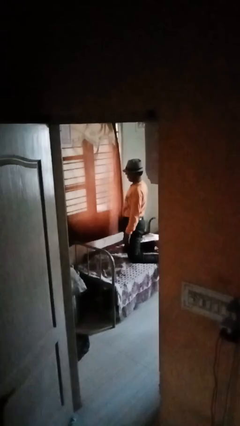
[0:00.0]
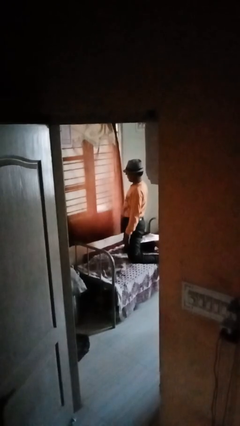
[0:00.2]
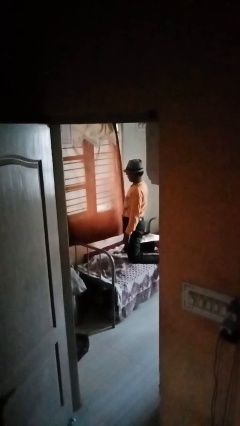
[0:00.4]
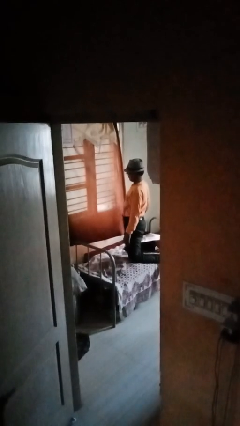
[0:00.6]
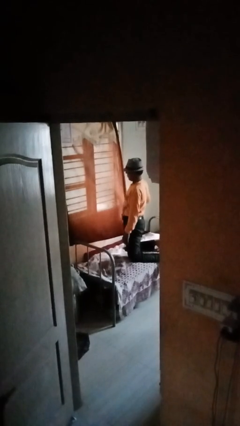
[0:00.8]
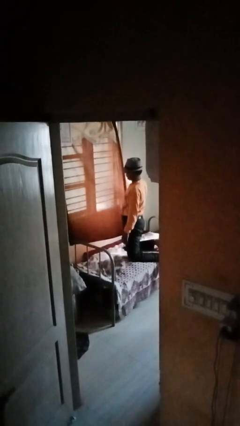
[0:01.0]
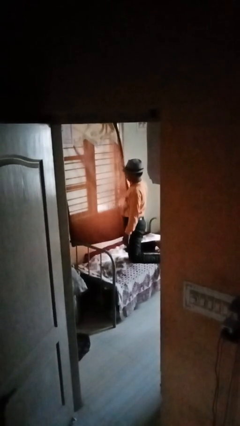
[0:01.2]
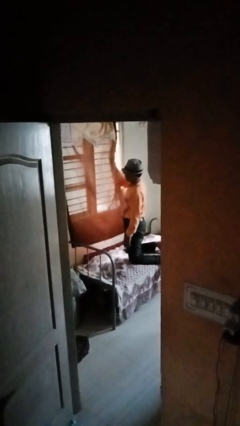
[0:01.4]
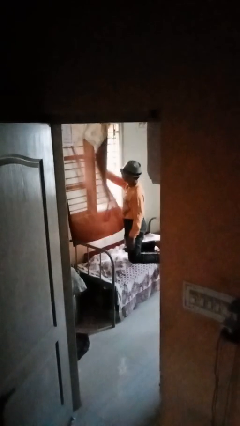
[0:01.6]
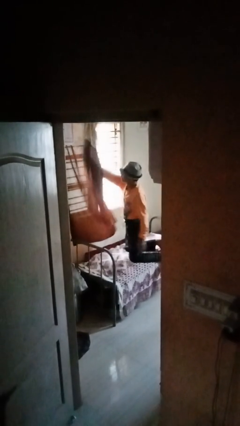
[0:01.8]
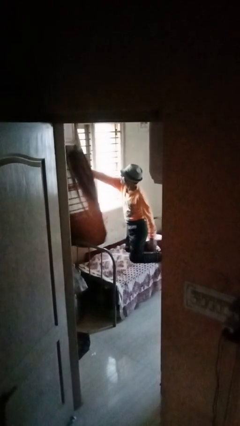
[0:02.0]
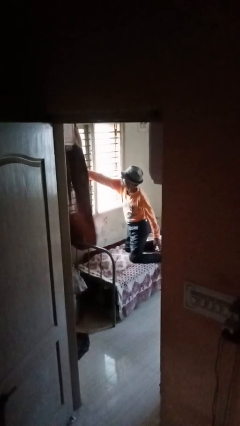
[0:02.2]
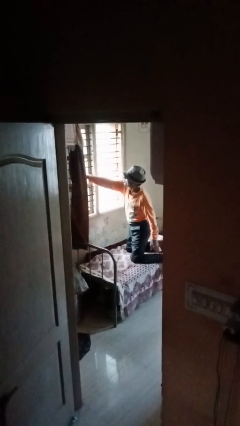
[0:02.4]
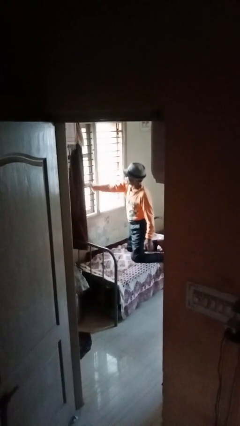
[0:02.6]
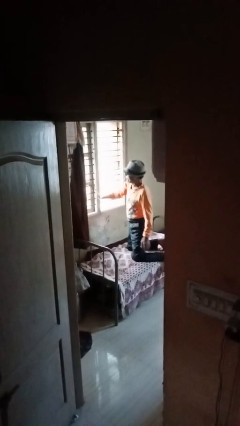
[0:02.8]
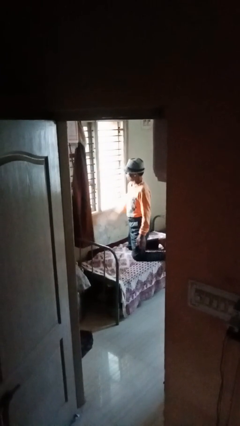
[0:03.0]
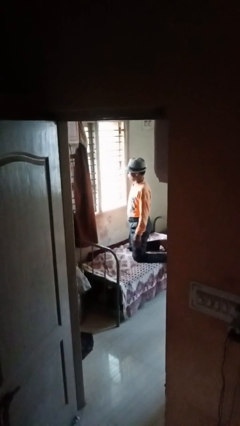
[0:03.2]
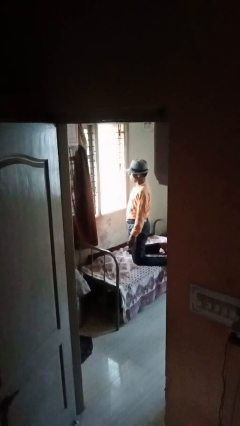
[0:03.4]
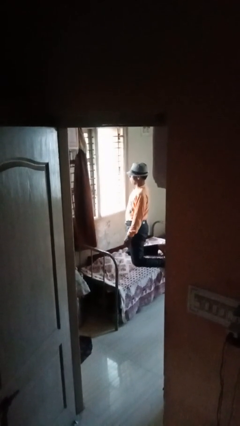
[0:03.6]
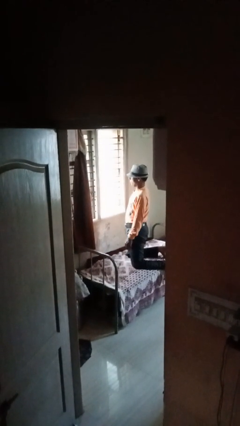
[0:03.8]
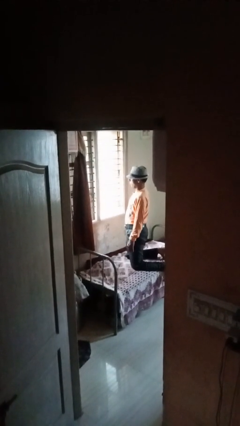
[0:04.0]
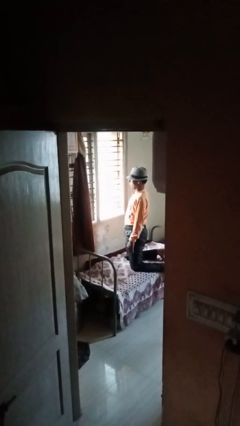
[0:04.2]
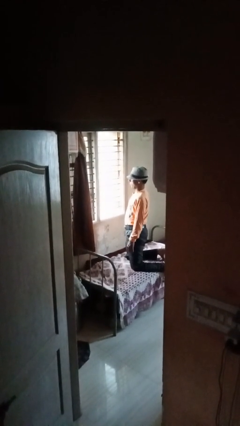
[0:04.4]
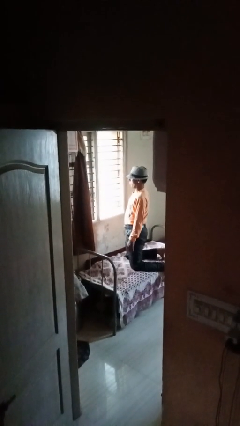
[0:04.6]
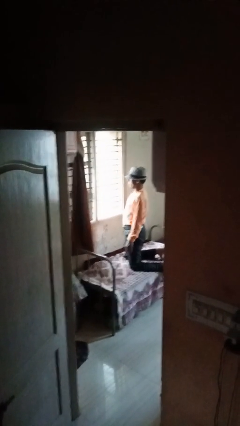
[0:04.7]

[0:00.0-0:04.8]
person opens curtains

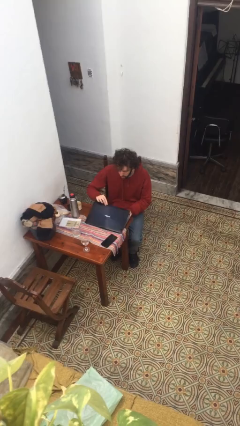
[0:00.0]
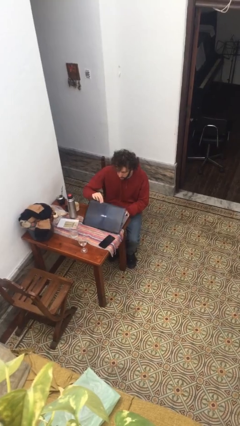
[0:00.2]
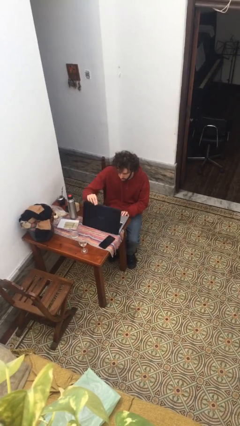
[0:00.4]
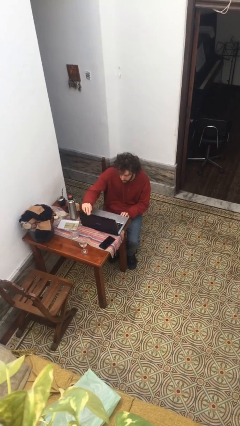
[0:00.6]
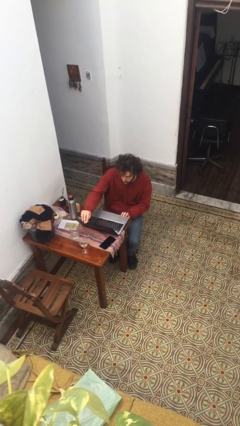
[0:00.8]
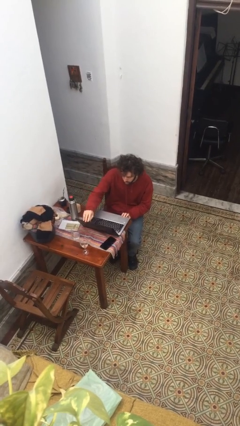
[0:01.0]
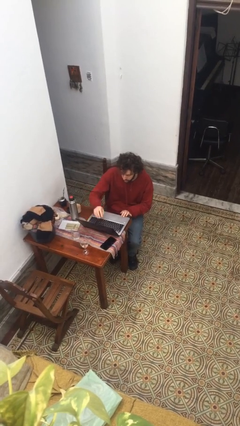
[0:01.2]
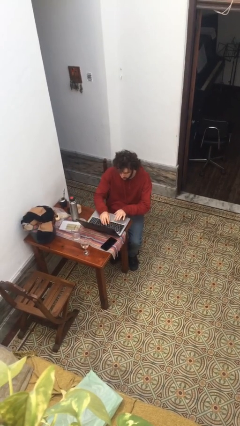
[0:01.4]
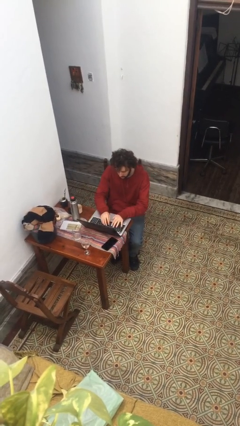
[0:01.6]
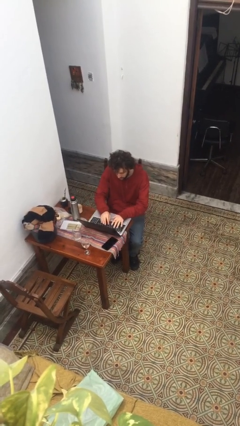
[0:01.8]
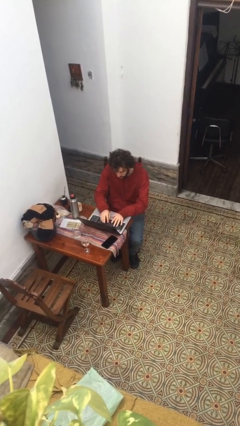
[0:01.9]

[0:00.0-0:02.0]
person opens laptop

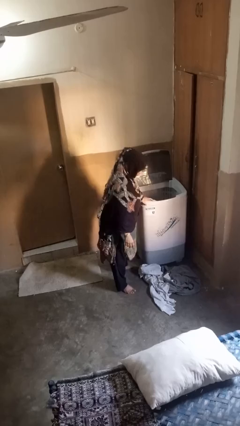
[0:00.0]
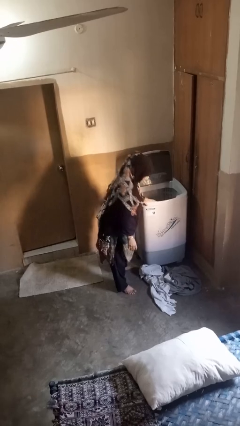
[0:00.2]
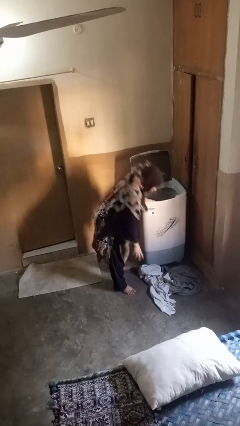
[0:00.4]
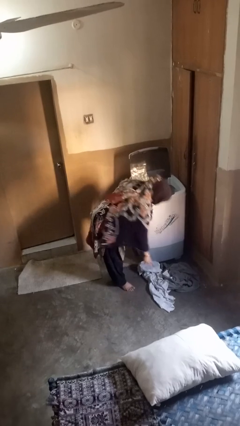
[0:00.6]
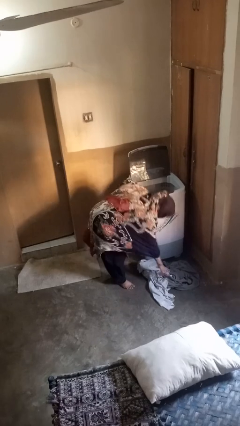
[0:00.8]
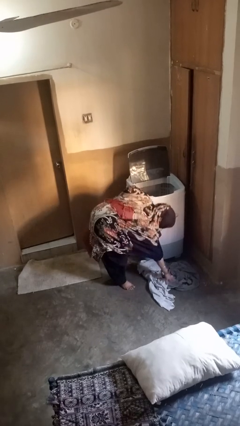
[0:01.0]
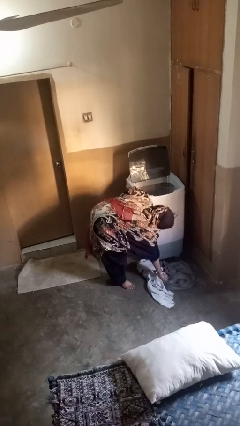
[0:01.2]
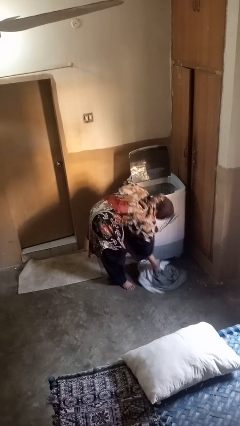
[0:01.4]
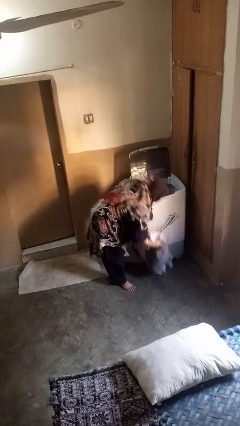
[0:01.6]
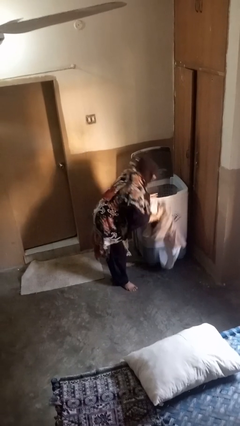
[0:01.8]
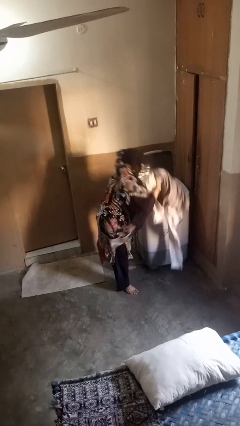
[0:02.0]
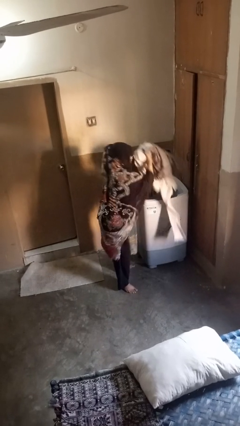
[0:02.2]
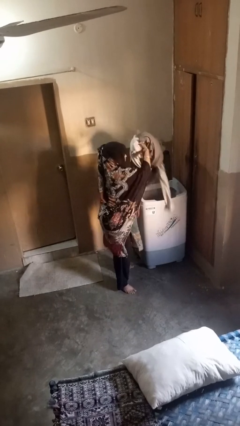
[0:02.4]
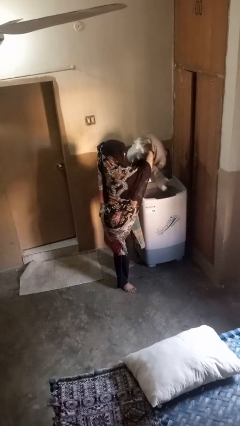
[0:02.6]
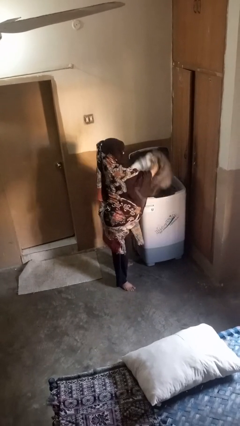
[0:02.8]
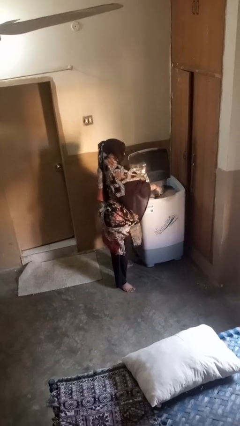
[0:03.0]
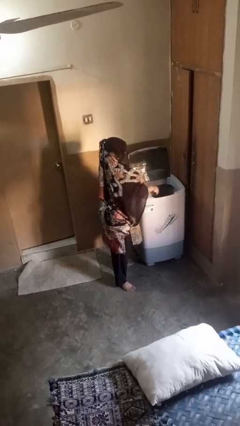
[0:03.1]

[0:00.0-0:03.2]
person loads clotheswasher

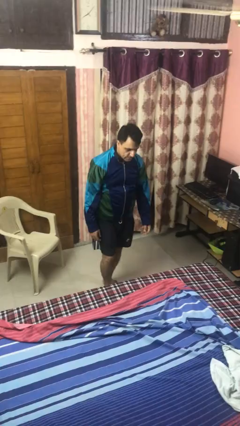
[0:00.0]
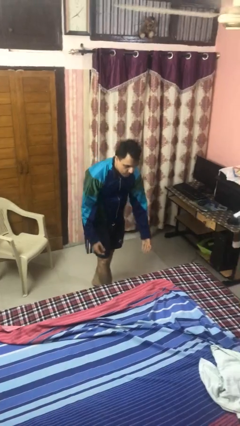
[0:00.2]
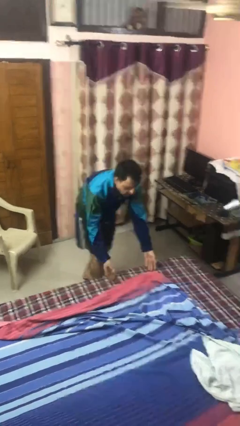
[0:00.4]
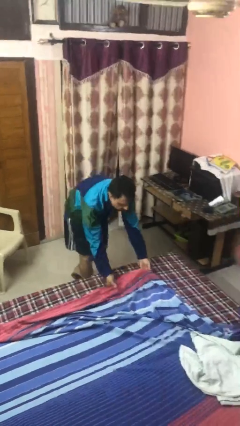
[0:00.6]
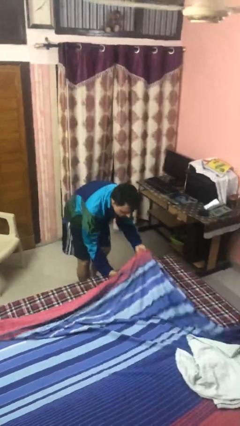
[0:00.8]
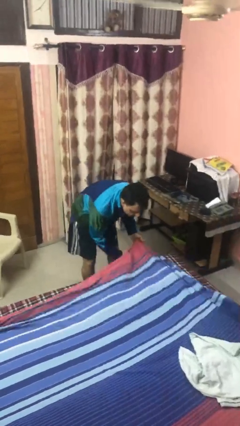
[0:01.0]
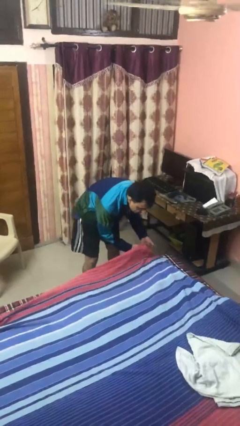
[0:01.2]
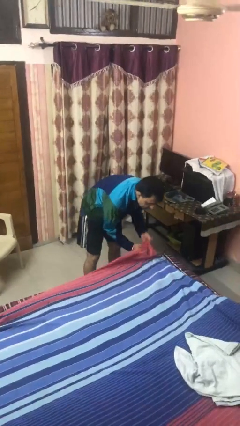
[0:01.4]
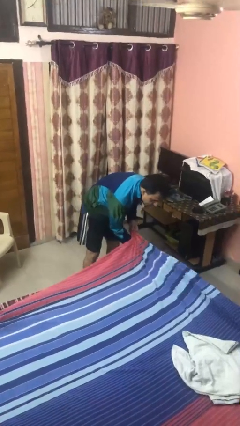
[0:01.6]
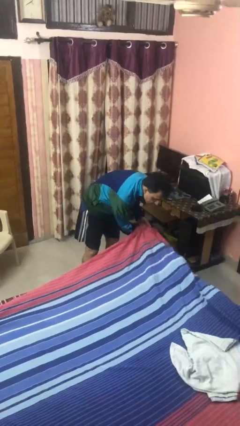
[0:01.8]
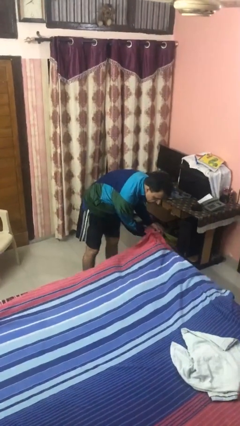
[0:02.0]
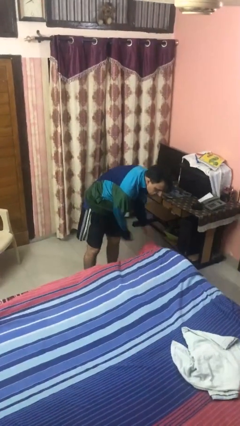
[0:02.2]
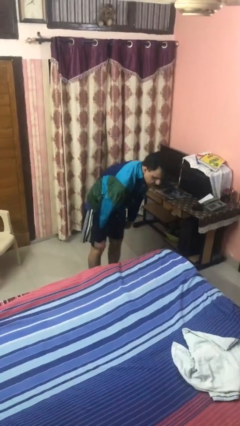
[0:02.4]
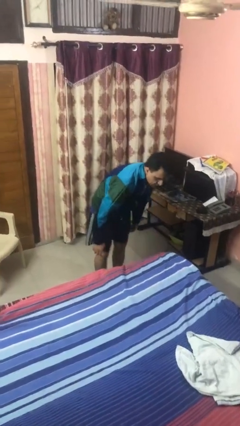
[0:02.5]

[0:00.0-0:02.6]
person makes bed

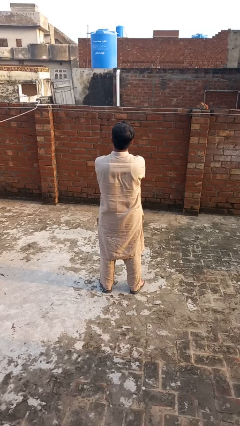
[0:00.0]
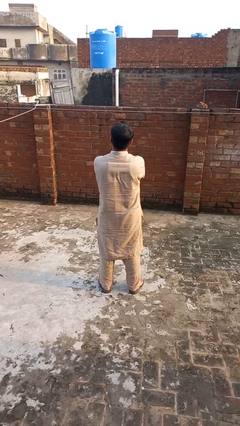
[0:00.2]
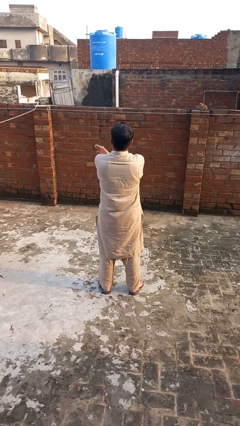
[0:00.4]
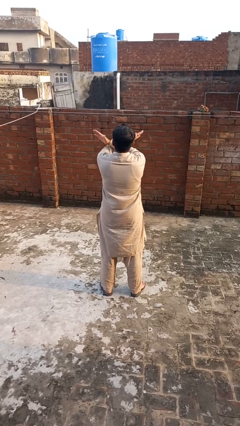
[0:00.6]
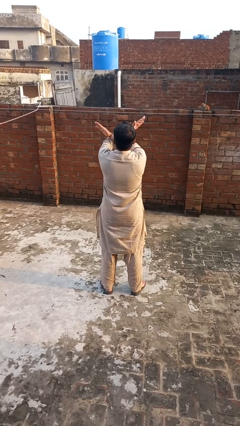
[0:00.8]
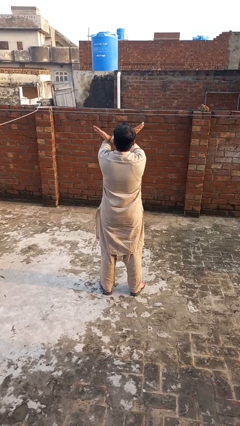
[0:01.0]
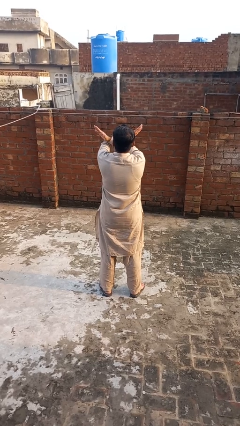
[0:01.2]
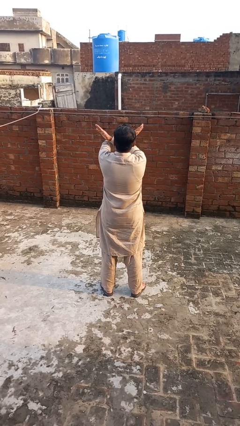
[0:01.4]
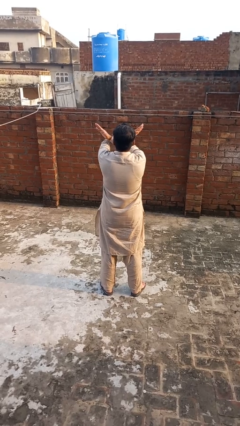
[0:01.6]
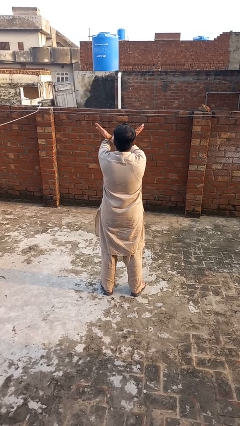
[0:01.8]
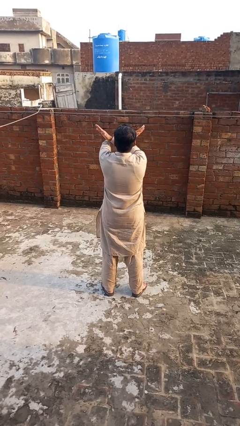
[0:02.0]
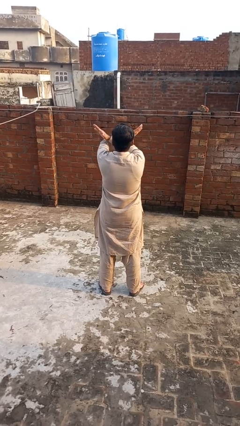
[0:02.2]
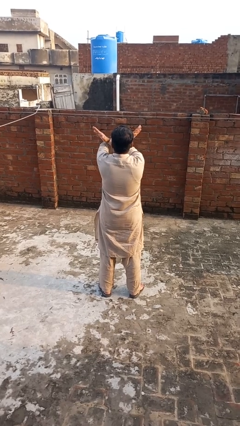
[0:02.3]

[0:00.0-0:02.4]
person gestures arms x

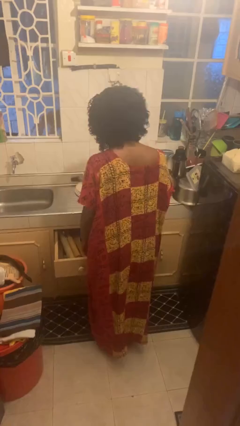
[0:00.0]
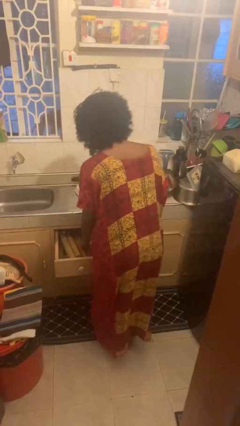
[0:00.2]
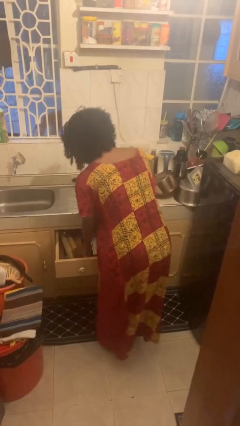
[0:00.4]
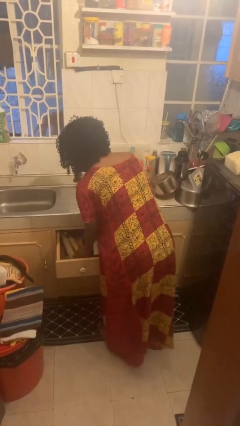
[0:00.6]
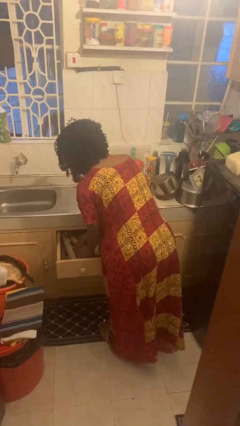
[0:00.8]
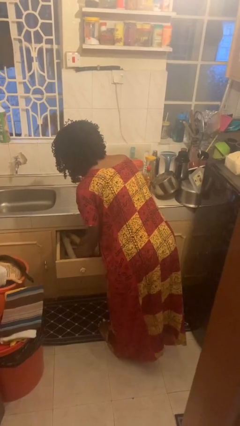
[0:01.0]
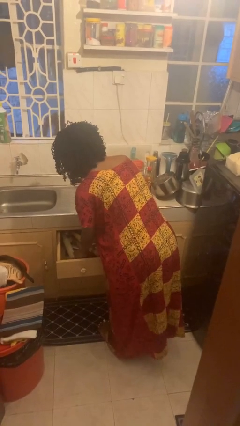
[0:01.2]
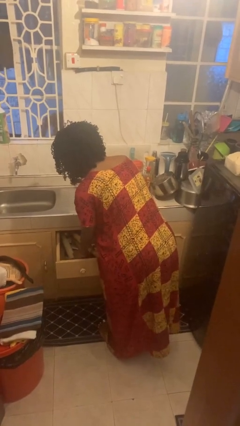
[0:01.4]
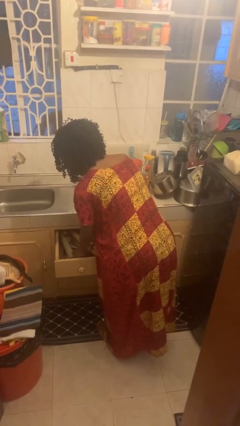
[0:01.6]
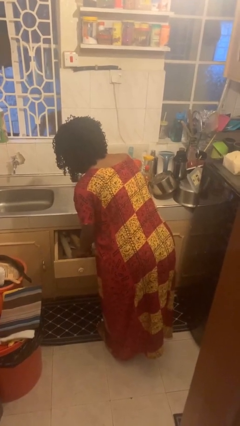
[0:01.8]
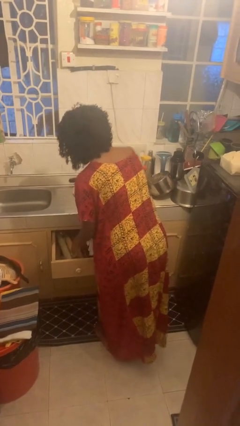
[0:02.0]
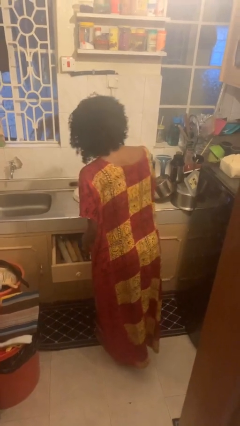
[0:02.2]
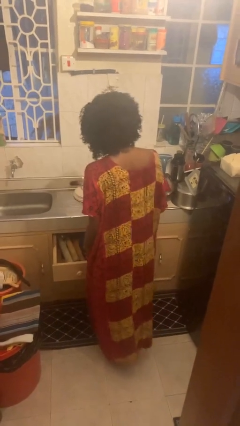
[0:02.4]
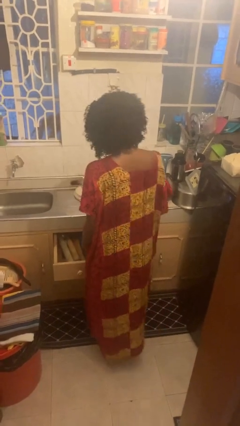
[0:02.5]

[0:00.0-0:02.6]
person searches in kitchen drawer
